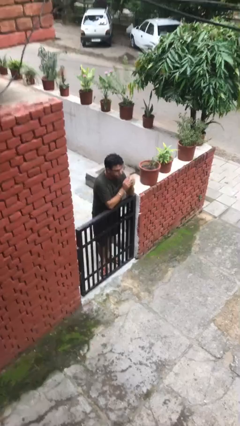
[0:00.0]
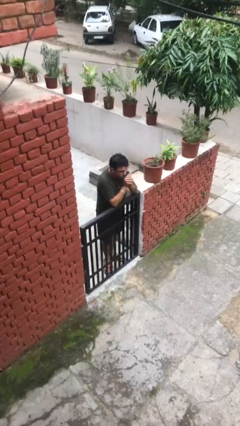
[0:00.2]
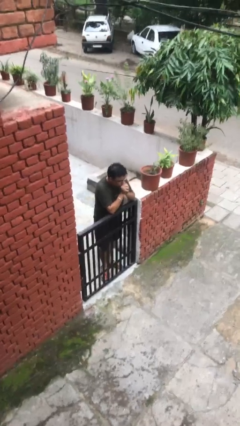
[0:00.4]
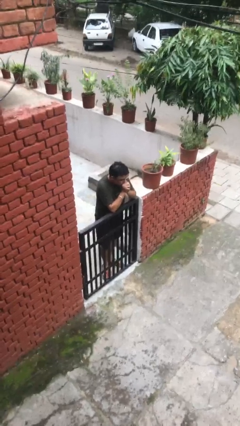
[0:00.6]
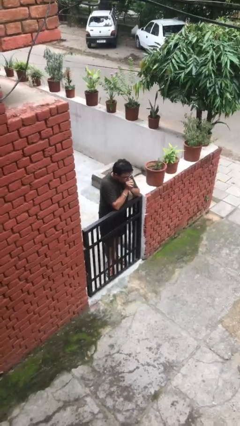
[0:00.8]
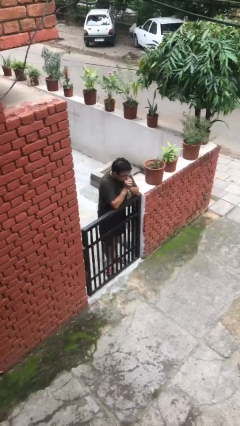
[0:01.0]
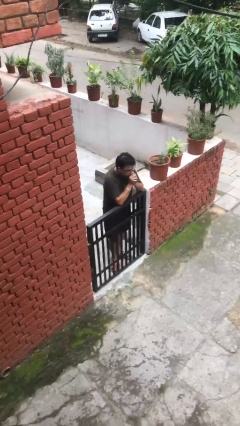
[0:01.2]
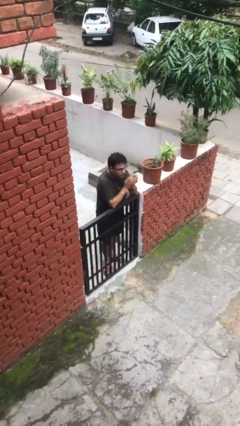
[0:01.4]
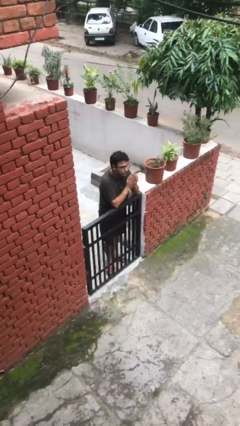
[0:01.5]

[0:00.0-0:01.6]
person blows into hands

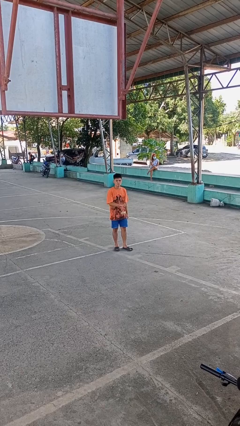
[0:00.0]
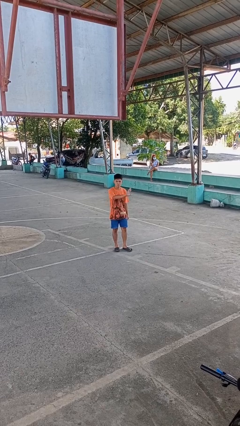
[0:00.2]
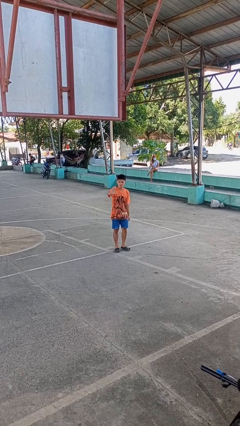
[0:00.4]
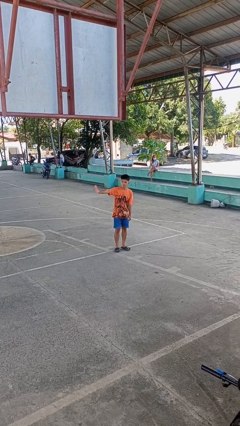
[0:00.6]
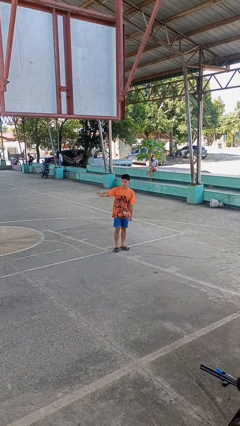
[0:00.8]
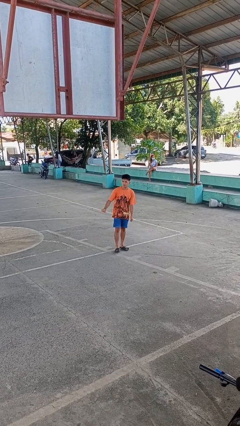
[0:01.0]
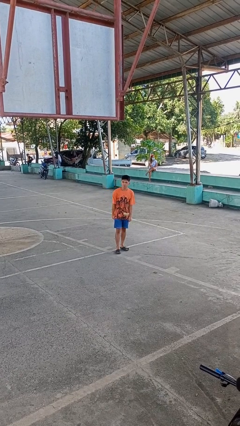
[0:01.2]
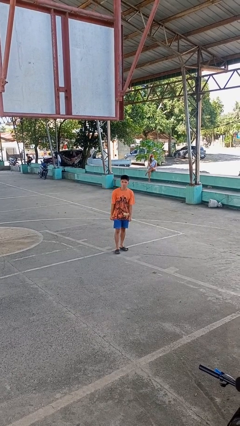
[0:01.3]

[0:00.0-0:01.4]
person gestures swipe right

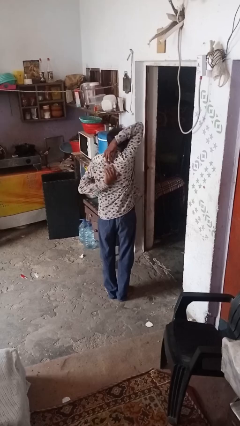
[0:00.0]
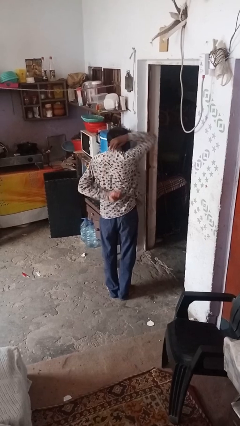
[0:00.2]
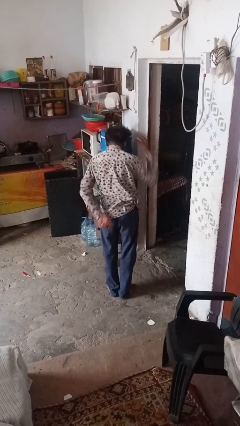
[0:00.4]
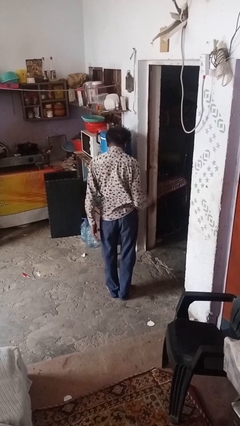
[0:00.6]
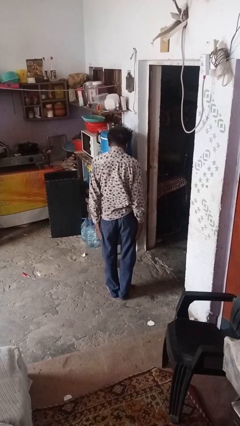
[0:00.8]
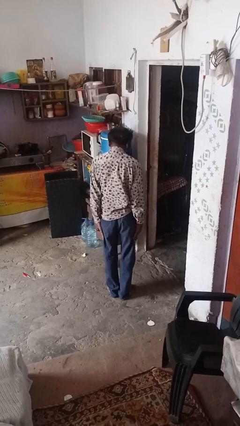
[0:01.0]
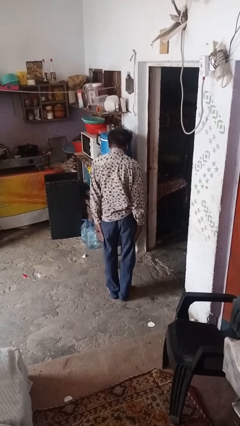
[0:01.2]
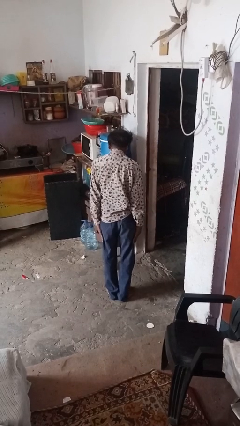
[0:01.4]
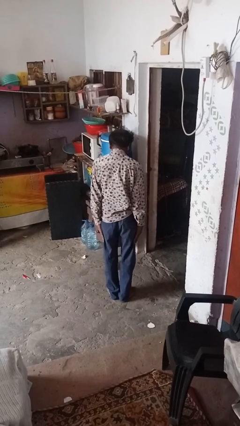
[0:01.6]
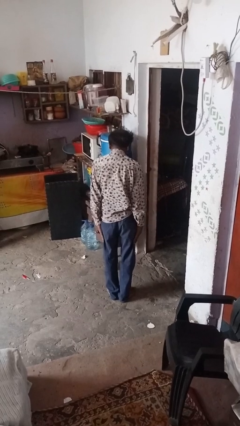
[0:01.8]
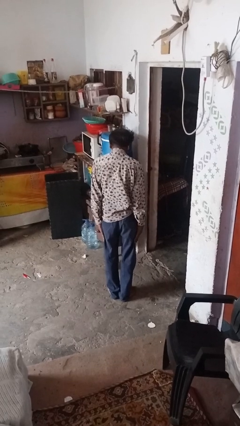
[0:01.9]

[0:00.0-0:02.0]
person stretches arms over head

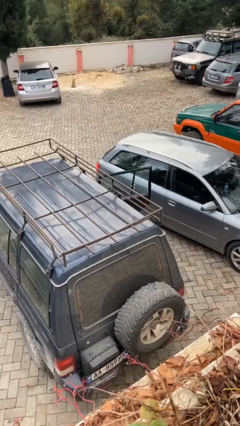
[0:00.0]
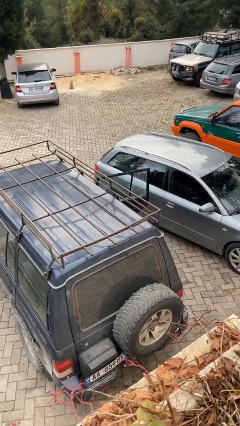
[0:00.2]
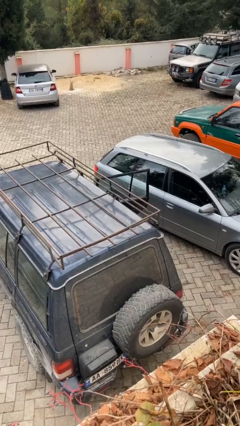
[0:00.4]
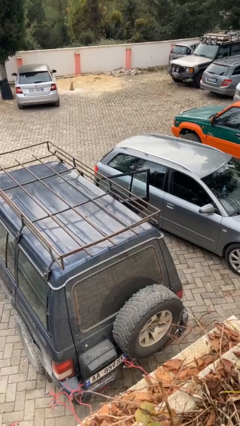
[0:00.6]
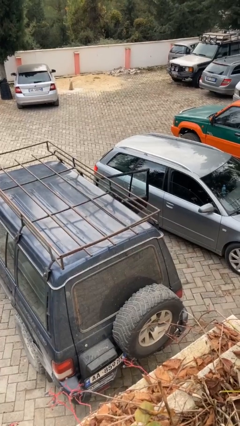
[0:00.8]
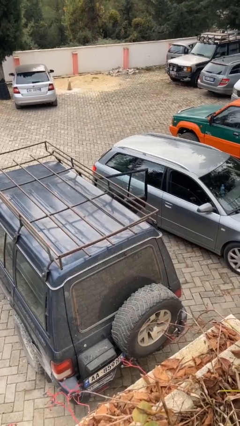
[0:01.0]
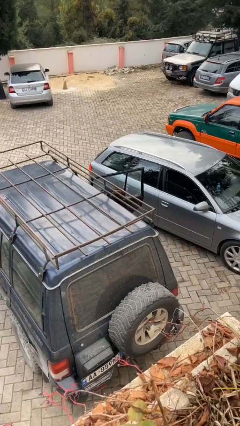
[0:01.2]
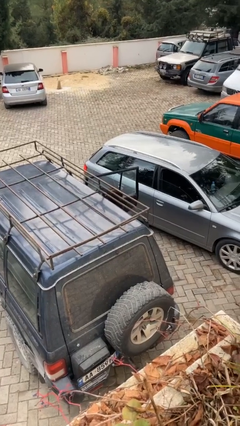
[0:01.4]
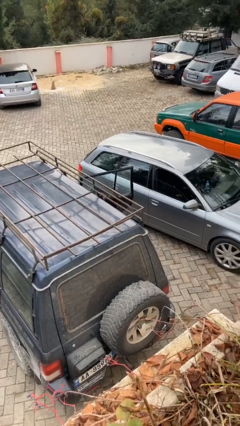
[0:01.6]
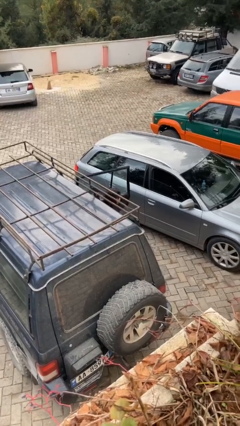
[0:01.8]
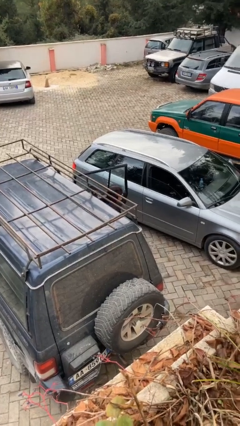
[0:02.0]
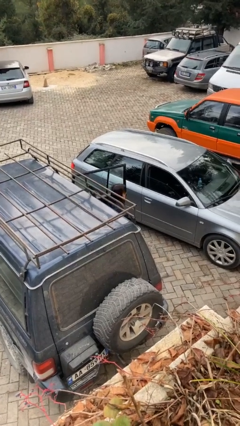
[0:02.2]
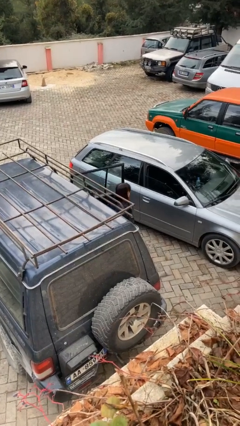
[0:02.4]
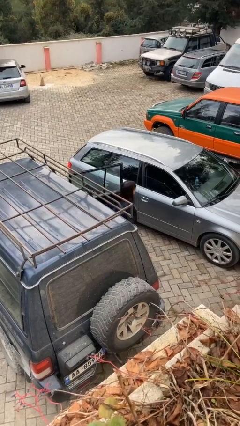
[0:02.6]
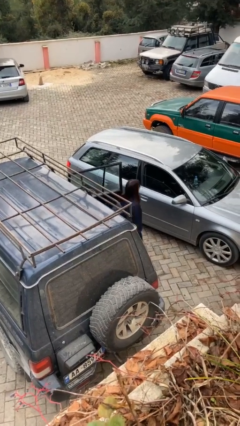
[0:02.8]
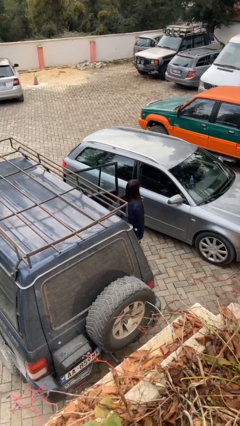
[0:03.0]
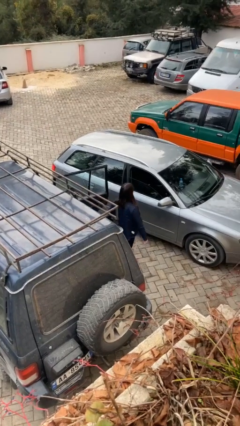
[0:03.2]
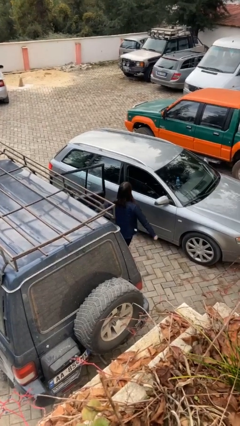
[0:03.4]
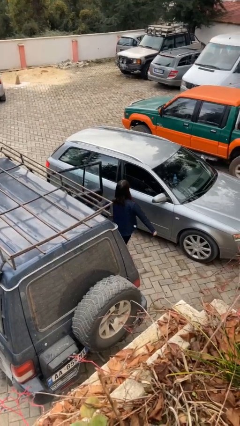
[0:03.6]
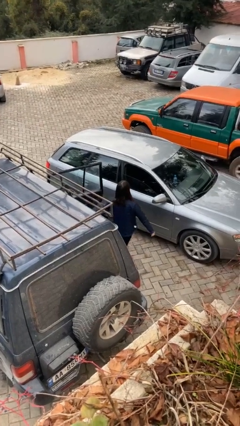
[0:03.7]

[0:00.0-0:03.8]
person exits car

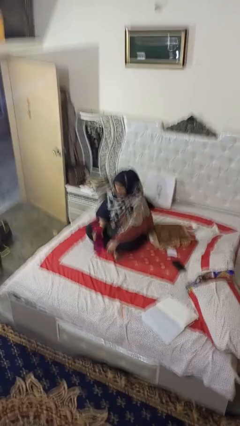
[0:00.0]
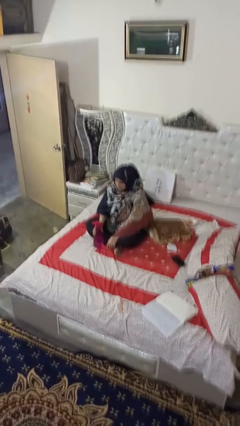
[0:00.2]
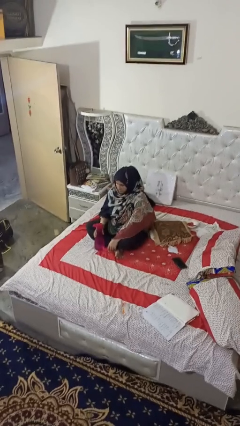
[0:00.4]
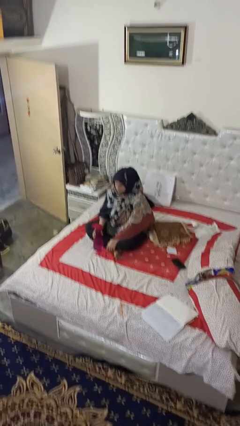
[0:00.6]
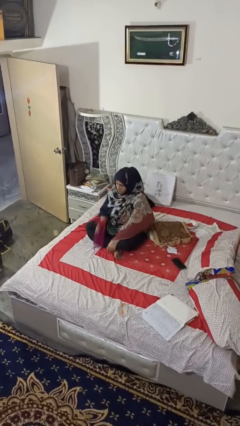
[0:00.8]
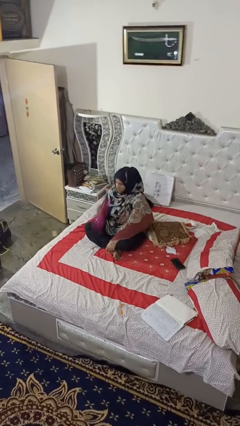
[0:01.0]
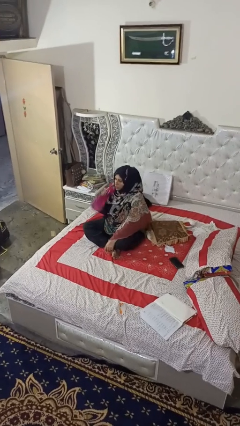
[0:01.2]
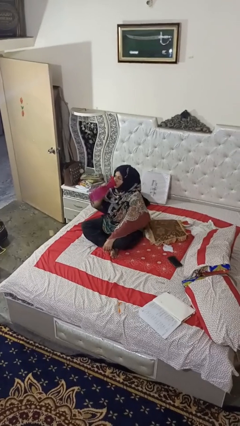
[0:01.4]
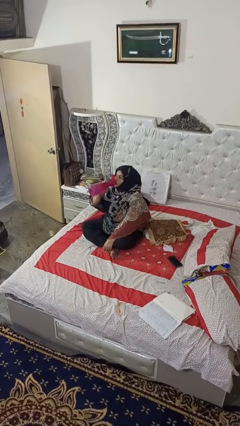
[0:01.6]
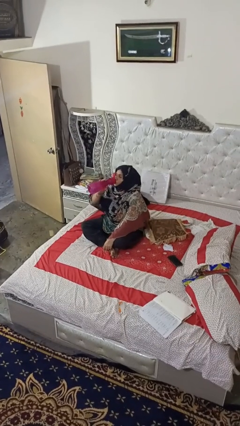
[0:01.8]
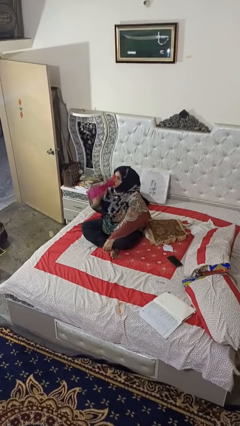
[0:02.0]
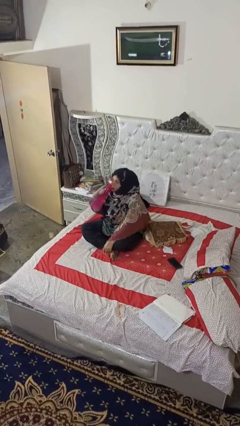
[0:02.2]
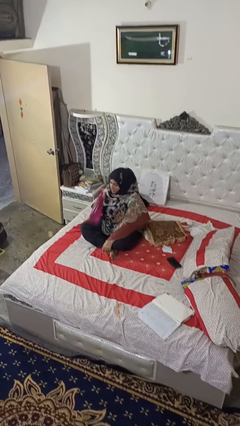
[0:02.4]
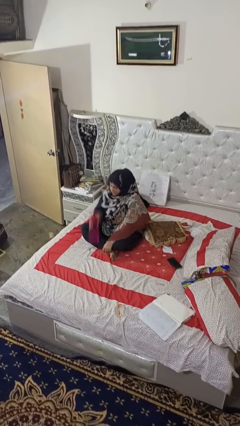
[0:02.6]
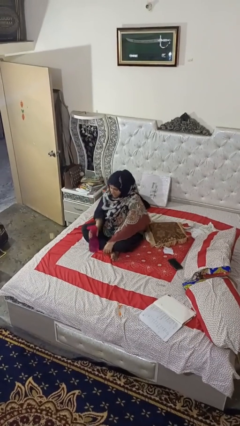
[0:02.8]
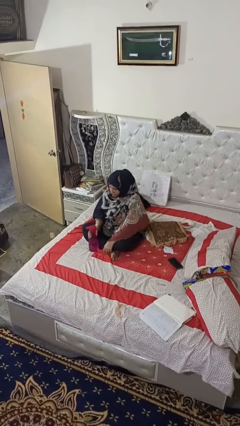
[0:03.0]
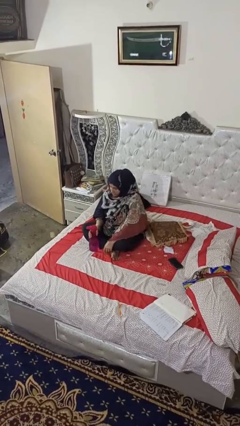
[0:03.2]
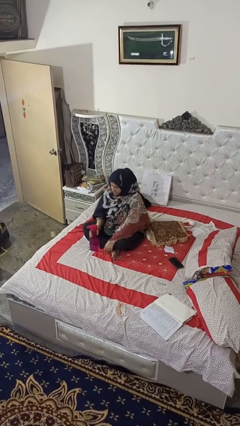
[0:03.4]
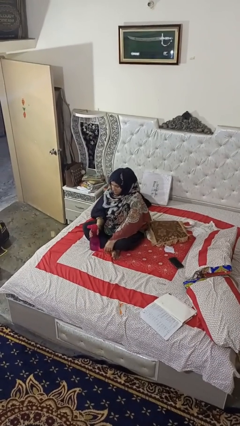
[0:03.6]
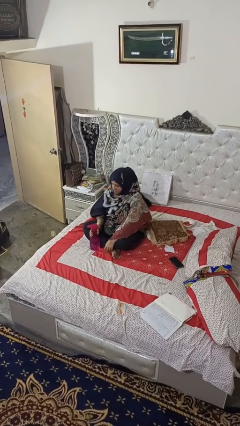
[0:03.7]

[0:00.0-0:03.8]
person drinks from bottle

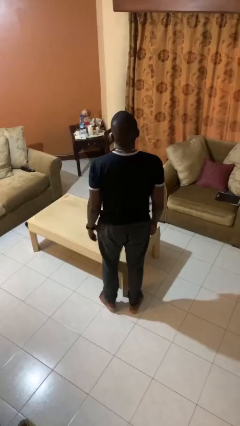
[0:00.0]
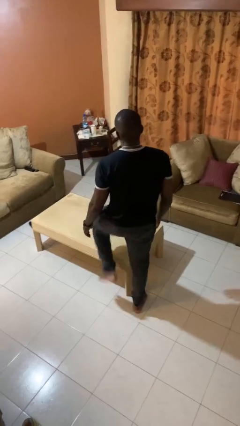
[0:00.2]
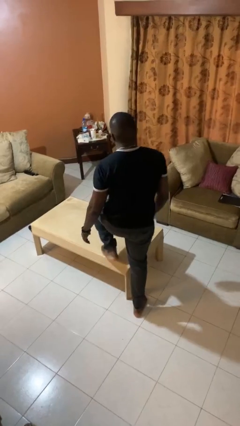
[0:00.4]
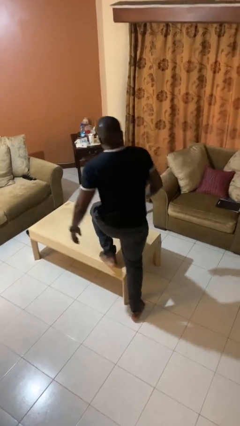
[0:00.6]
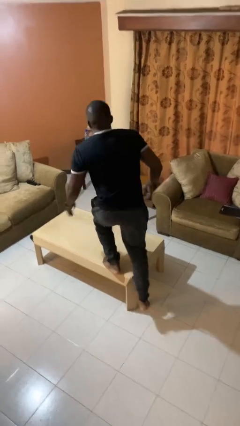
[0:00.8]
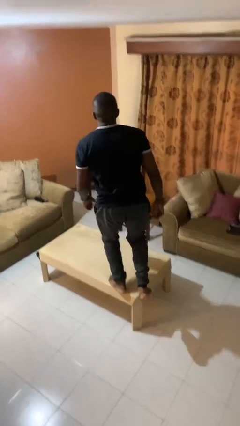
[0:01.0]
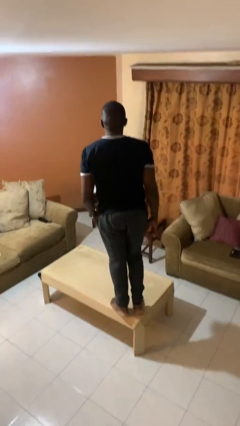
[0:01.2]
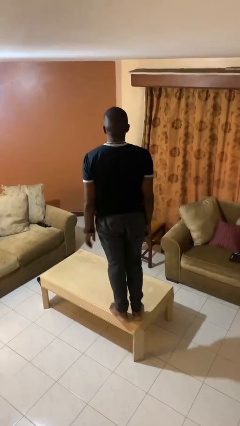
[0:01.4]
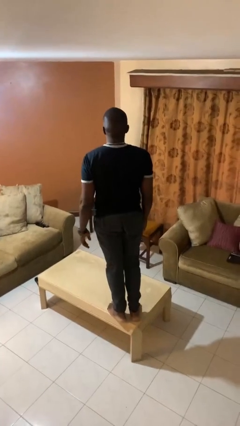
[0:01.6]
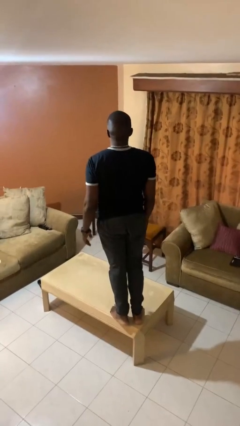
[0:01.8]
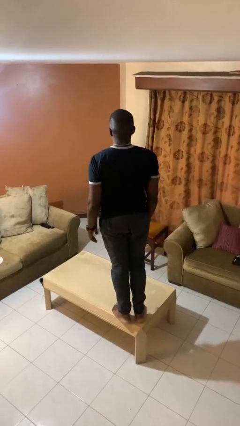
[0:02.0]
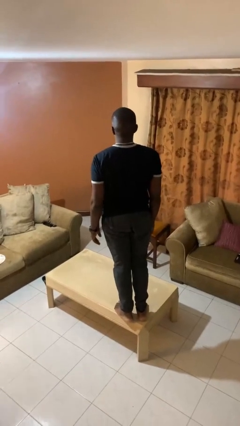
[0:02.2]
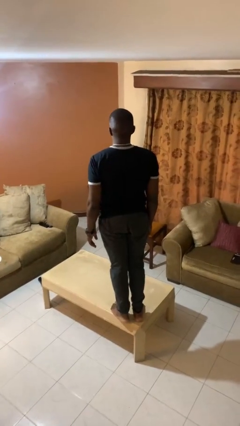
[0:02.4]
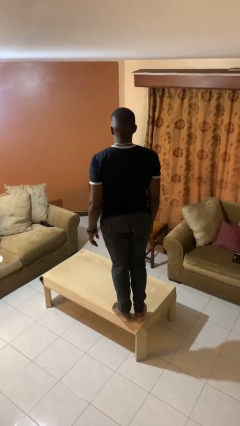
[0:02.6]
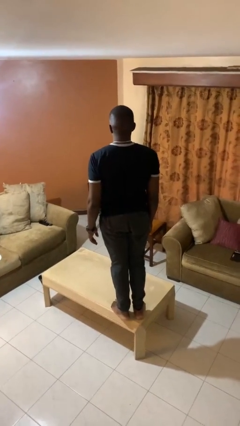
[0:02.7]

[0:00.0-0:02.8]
person climbs on table

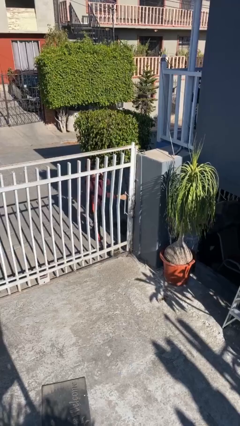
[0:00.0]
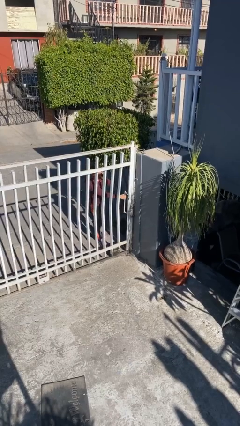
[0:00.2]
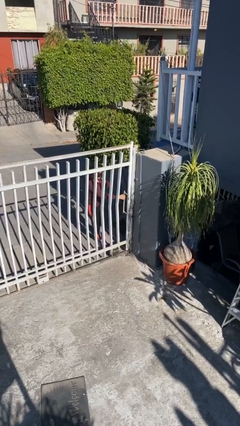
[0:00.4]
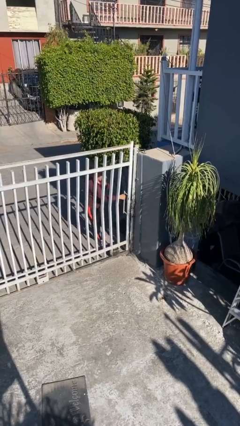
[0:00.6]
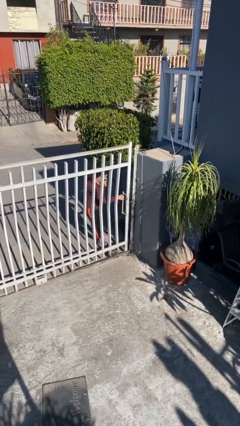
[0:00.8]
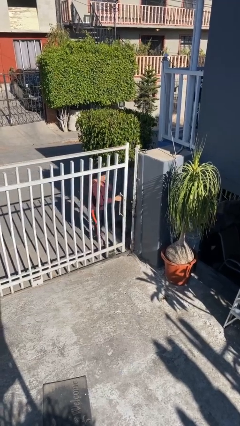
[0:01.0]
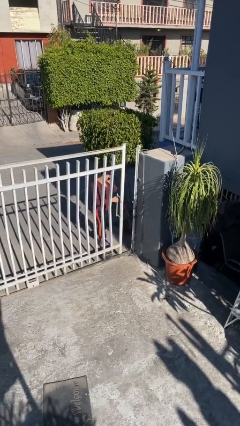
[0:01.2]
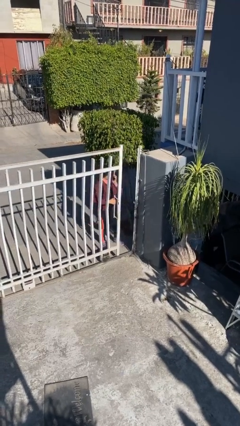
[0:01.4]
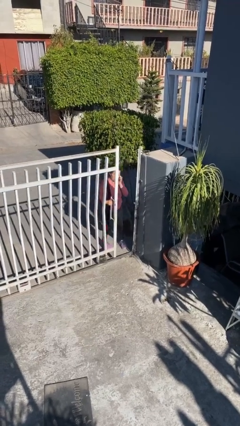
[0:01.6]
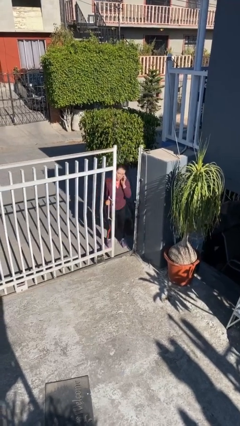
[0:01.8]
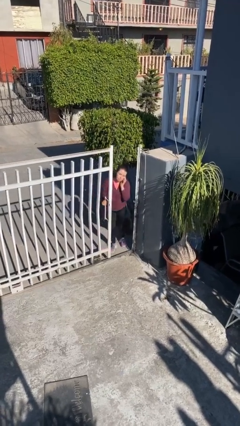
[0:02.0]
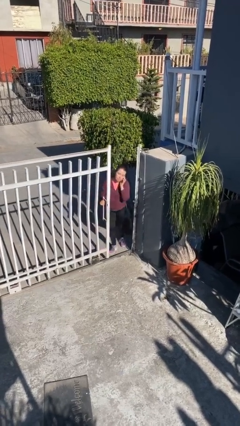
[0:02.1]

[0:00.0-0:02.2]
person opens facility door
